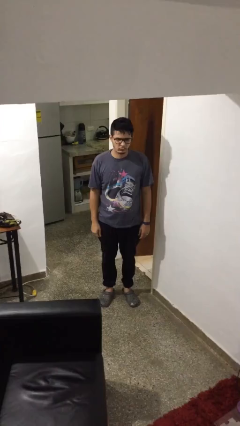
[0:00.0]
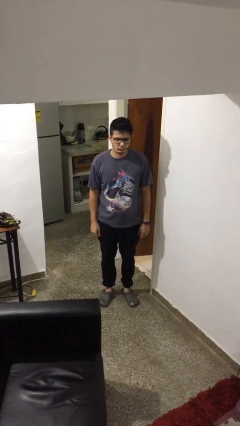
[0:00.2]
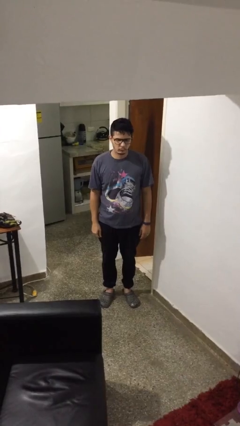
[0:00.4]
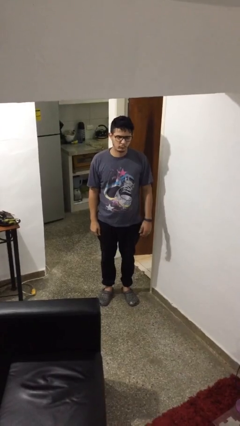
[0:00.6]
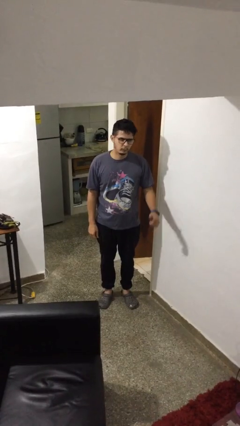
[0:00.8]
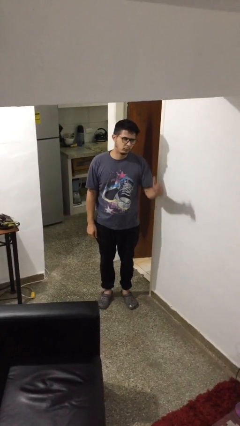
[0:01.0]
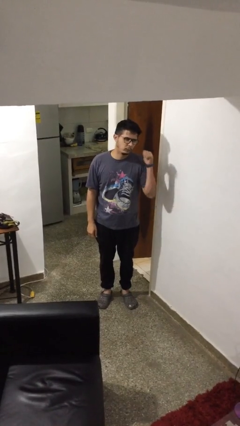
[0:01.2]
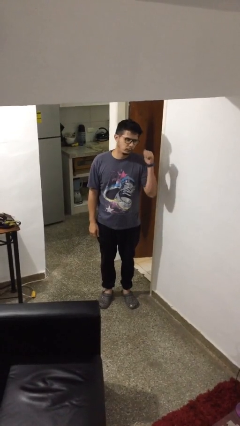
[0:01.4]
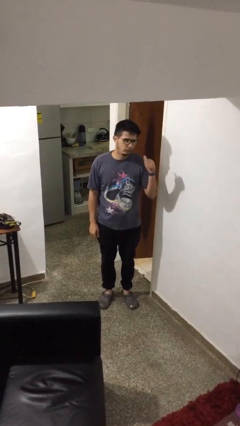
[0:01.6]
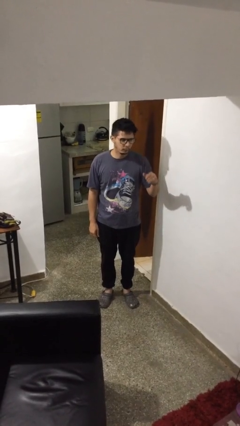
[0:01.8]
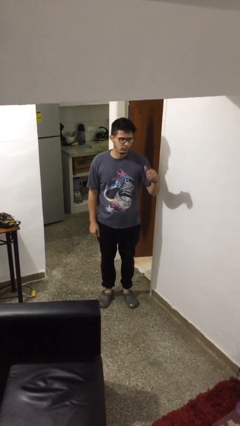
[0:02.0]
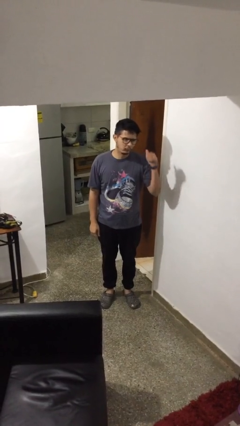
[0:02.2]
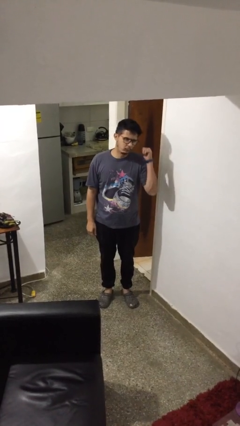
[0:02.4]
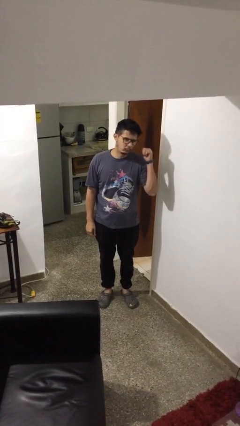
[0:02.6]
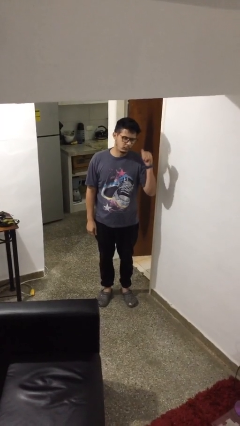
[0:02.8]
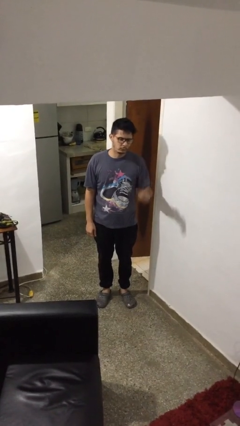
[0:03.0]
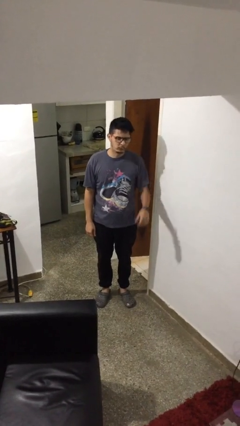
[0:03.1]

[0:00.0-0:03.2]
person gestures behind me

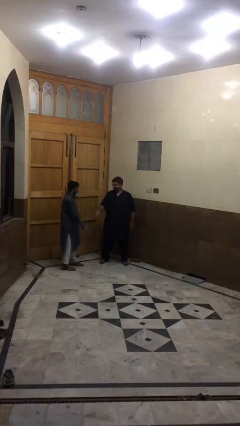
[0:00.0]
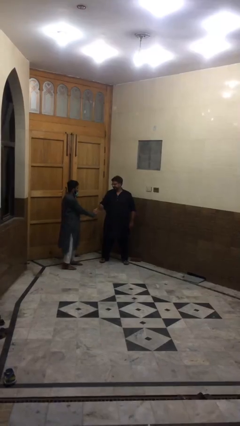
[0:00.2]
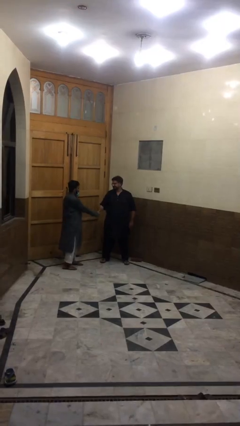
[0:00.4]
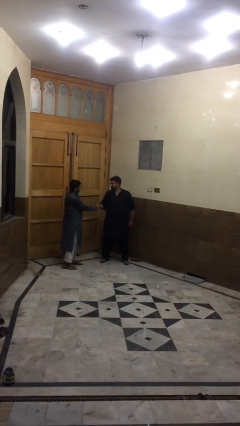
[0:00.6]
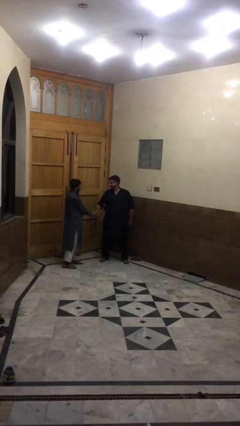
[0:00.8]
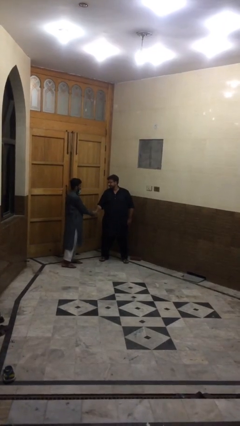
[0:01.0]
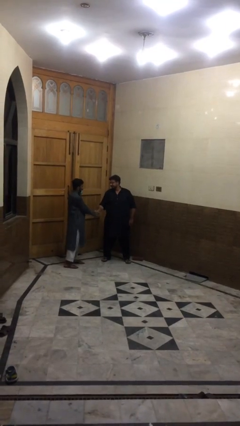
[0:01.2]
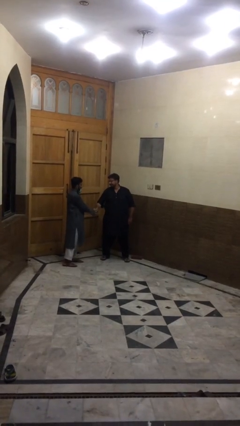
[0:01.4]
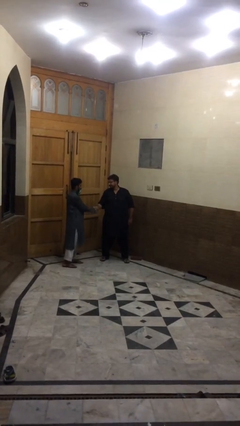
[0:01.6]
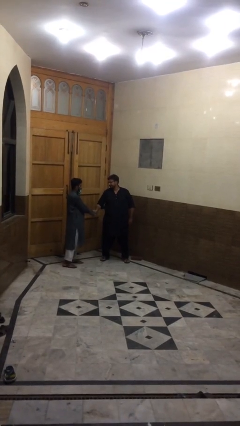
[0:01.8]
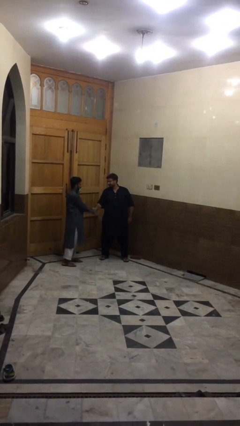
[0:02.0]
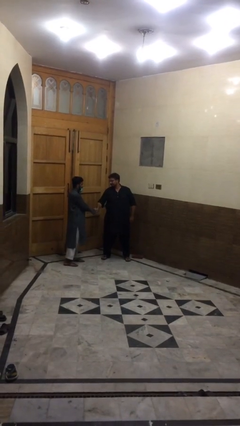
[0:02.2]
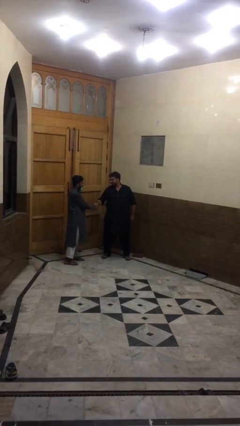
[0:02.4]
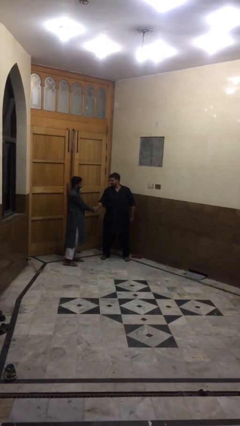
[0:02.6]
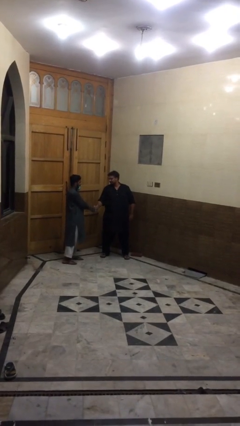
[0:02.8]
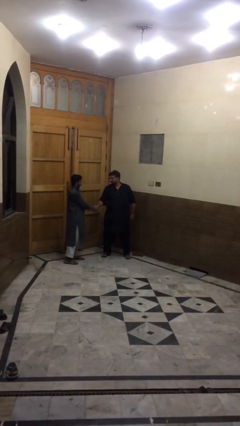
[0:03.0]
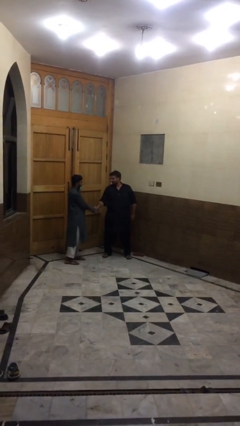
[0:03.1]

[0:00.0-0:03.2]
person shakes hand

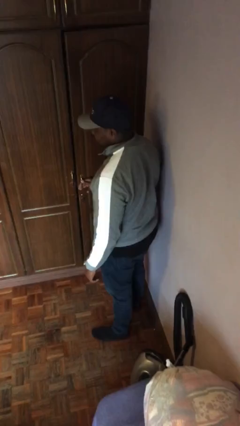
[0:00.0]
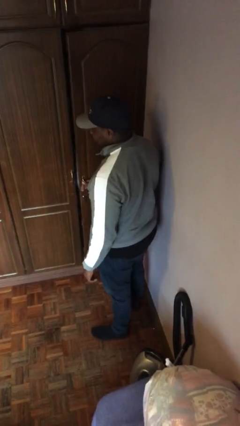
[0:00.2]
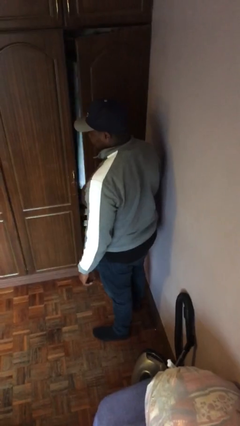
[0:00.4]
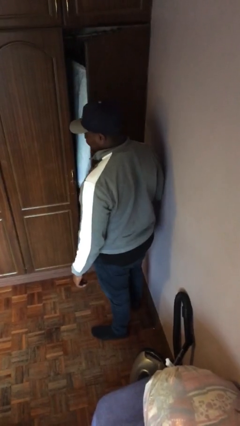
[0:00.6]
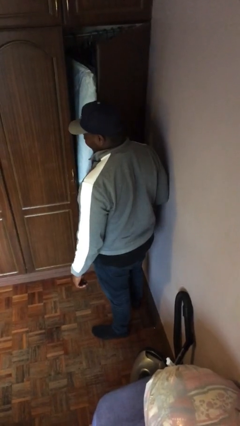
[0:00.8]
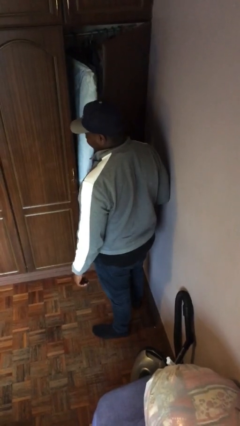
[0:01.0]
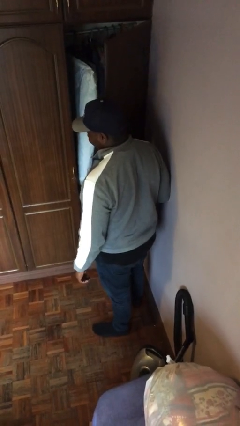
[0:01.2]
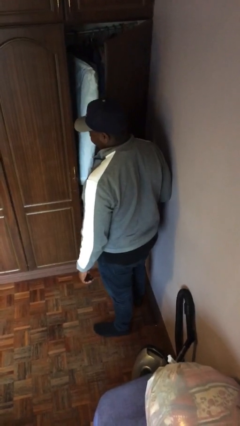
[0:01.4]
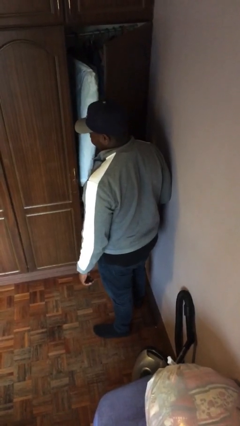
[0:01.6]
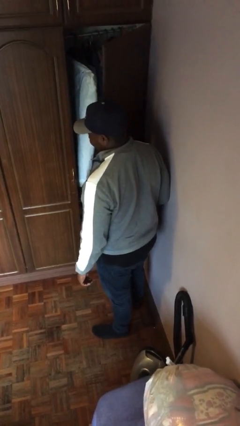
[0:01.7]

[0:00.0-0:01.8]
person opens closet door

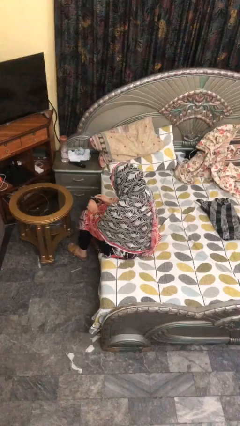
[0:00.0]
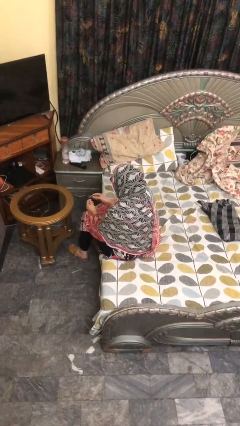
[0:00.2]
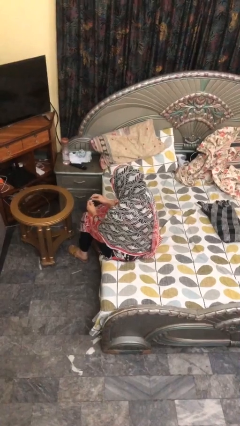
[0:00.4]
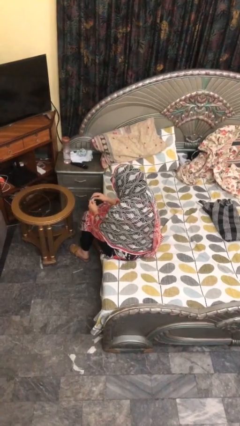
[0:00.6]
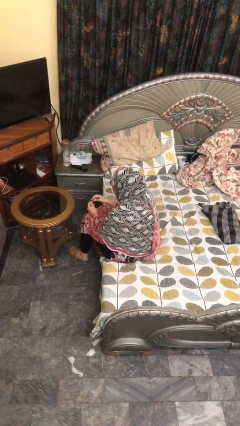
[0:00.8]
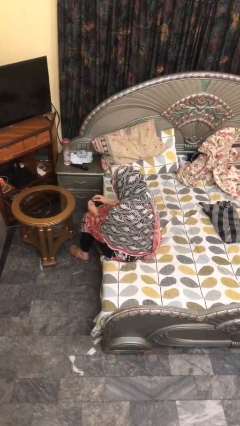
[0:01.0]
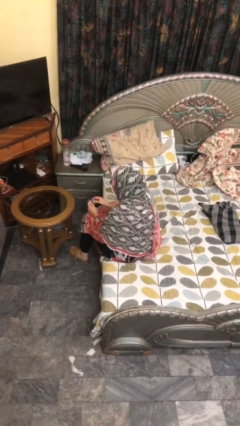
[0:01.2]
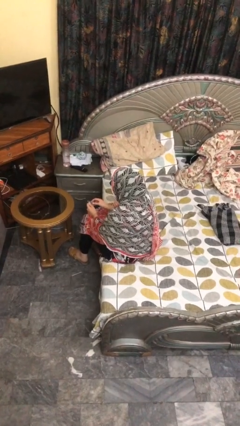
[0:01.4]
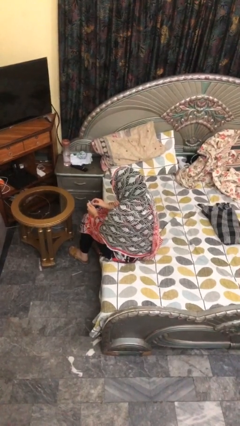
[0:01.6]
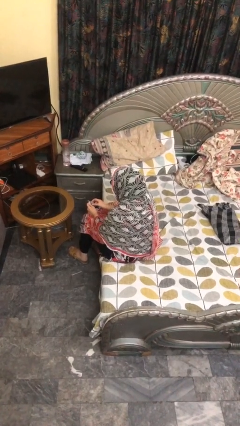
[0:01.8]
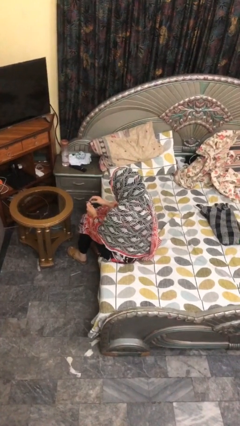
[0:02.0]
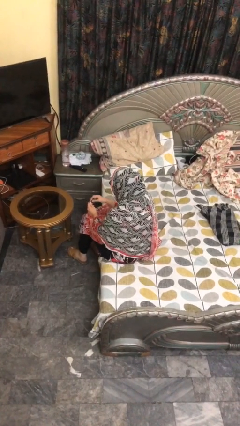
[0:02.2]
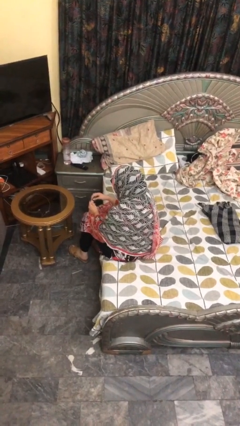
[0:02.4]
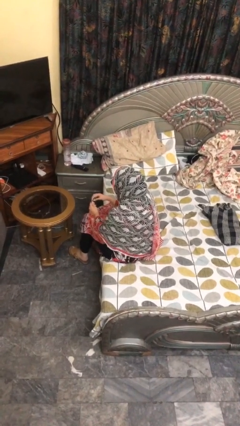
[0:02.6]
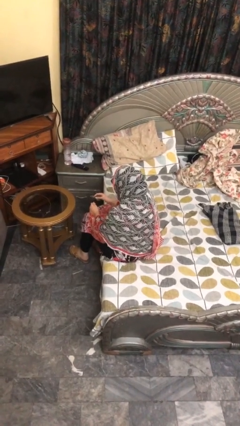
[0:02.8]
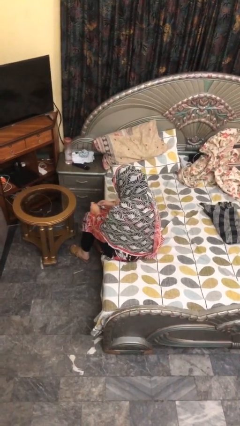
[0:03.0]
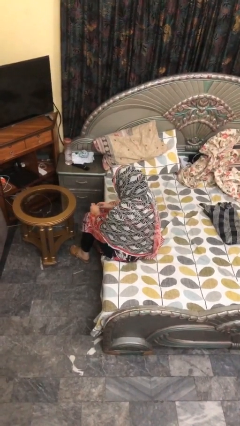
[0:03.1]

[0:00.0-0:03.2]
person files fingernails

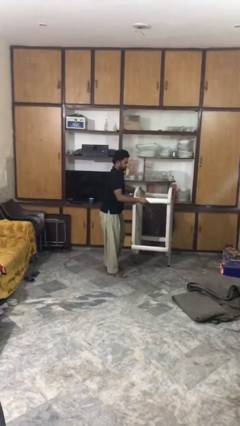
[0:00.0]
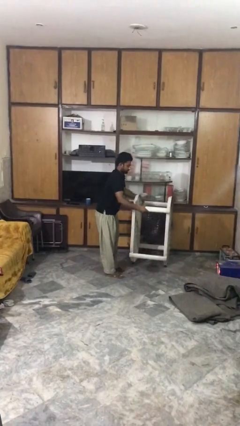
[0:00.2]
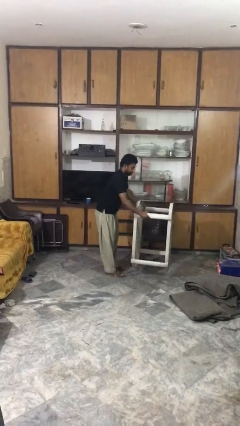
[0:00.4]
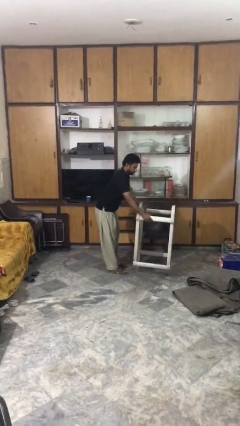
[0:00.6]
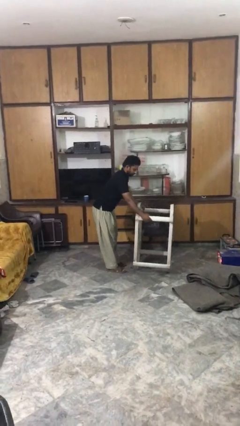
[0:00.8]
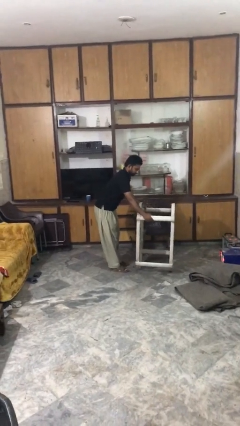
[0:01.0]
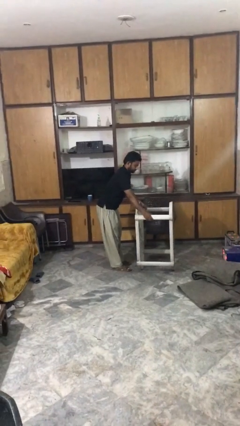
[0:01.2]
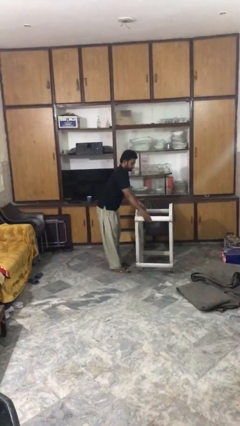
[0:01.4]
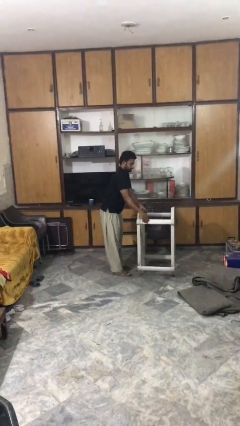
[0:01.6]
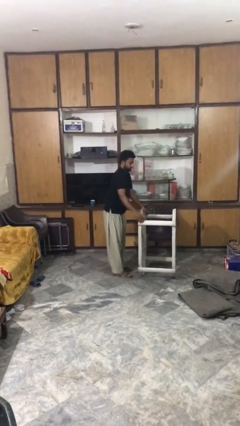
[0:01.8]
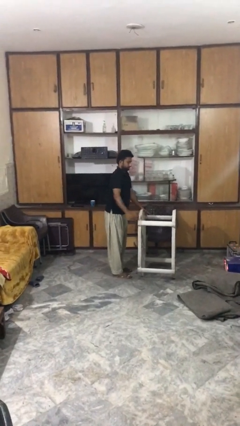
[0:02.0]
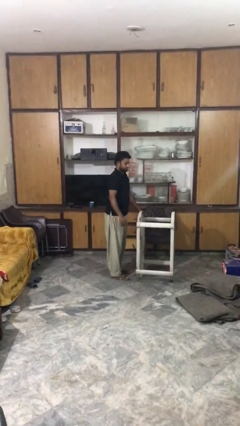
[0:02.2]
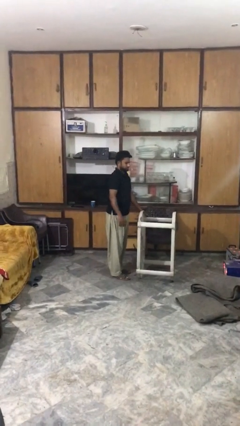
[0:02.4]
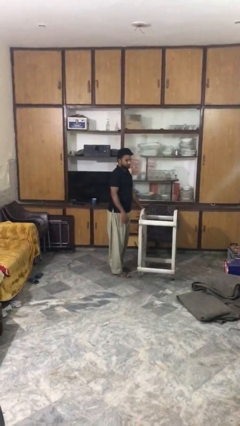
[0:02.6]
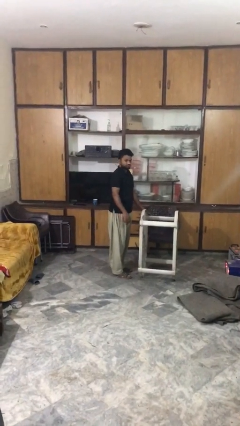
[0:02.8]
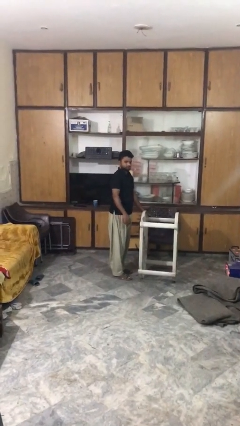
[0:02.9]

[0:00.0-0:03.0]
person puts down object on floor

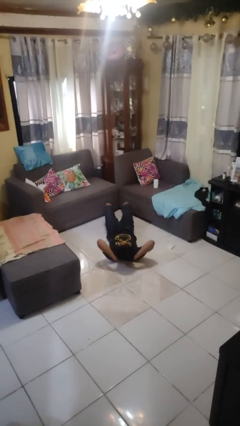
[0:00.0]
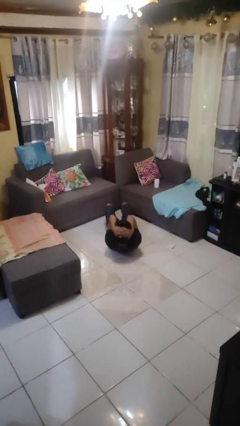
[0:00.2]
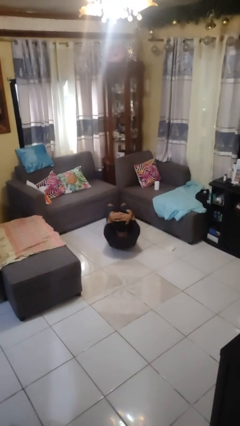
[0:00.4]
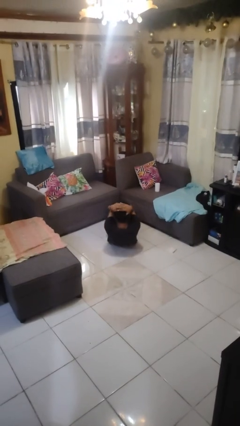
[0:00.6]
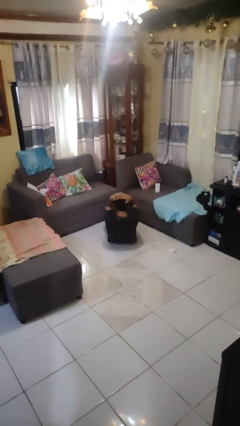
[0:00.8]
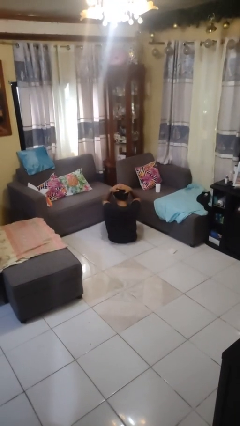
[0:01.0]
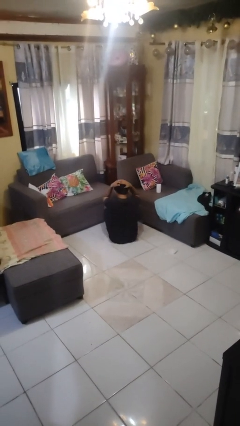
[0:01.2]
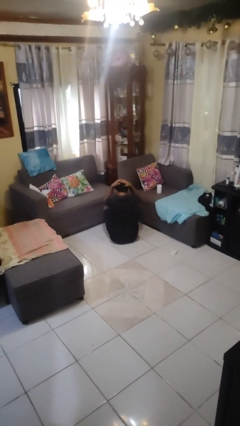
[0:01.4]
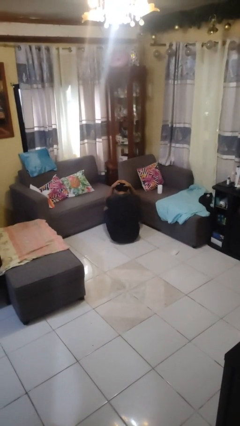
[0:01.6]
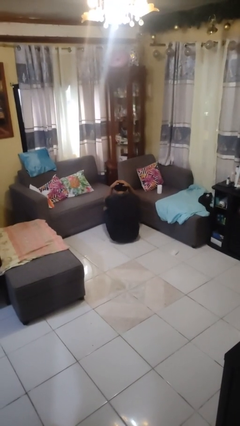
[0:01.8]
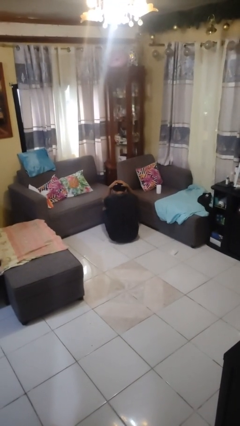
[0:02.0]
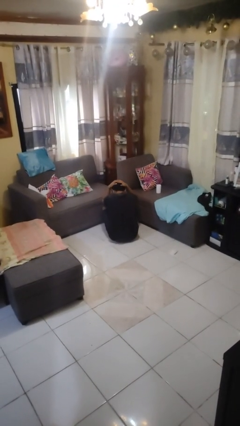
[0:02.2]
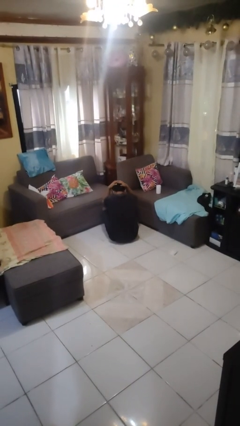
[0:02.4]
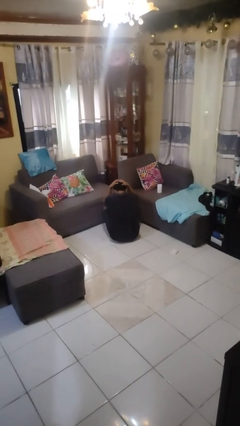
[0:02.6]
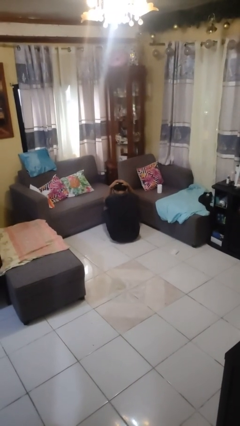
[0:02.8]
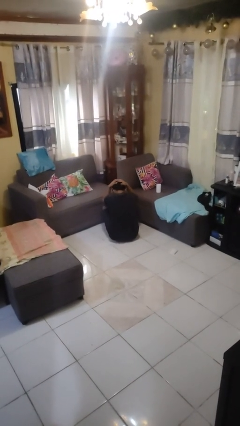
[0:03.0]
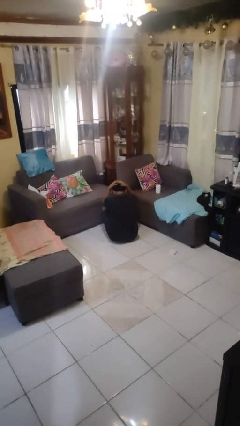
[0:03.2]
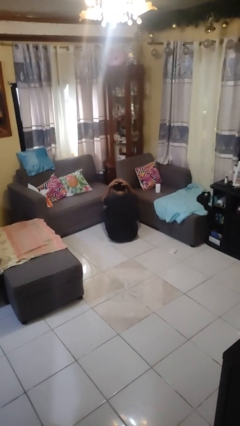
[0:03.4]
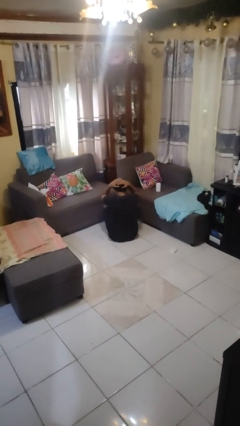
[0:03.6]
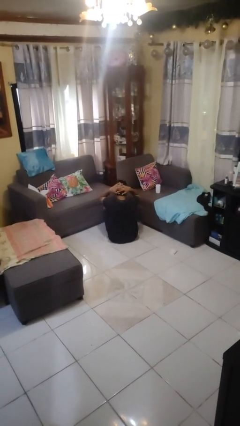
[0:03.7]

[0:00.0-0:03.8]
person exercises with situp
